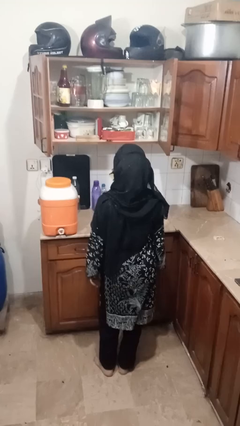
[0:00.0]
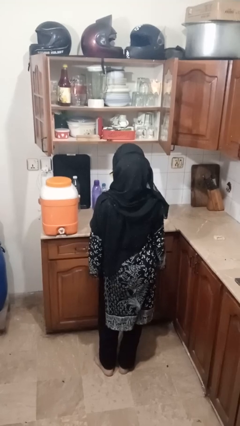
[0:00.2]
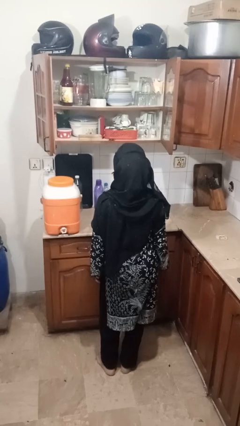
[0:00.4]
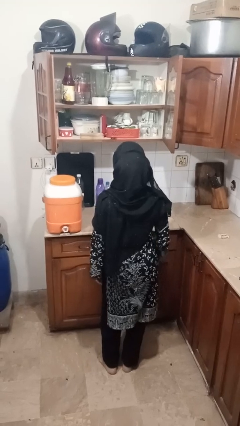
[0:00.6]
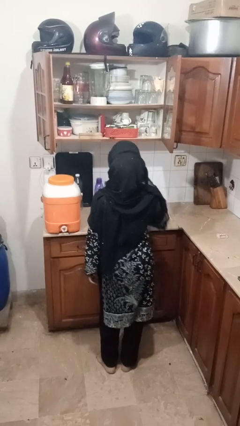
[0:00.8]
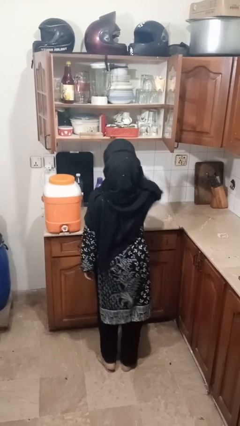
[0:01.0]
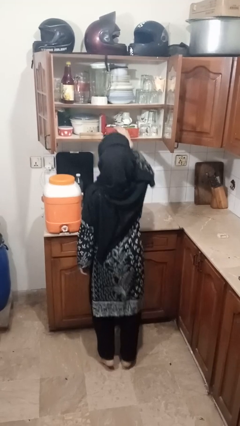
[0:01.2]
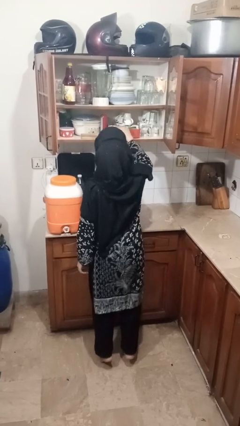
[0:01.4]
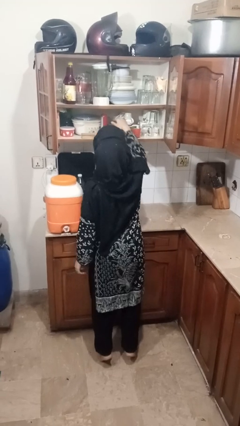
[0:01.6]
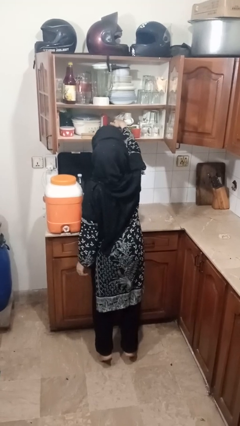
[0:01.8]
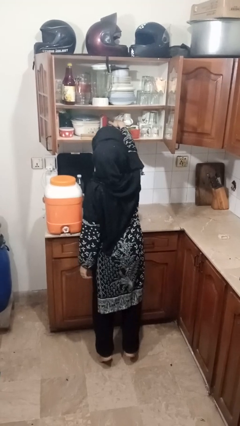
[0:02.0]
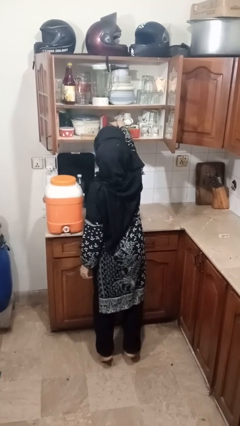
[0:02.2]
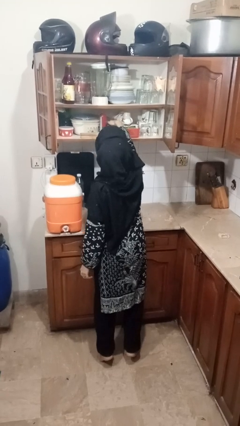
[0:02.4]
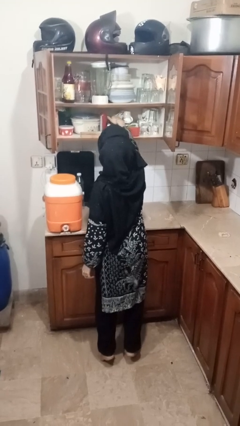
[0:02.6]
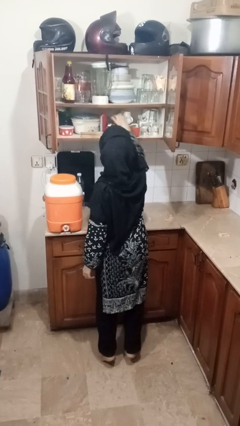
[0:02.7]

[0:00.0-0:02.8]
person searches in cabinet

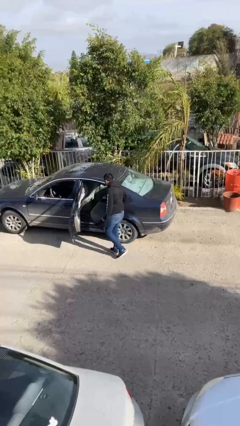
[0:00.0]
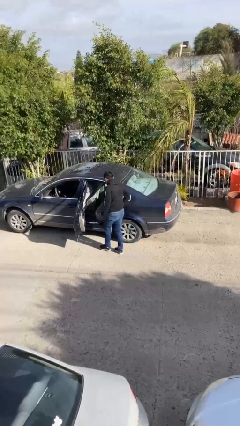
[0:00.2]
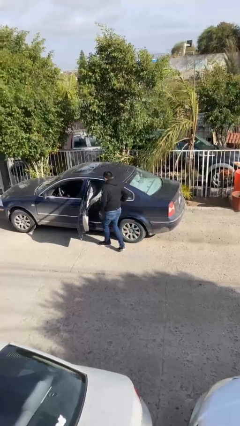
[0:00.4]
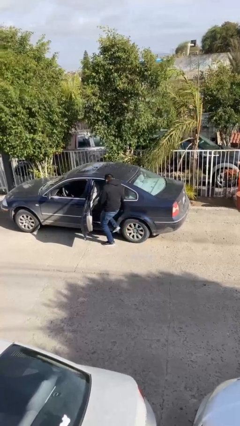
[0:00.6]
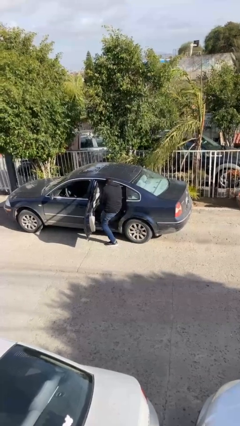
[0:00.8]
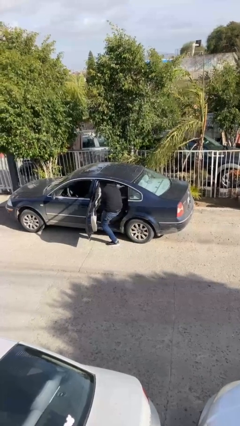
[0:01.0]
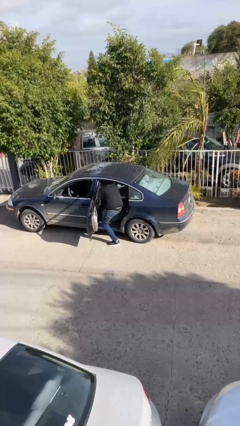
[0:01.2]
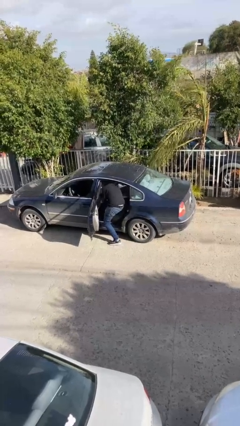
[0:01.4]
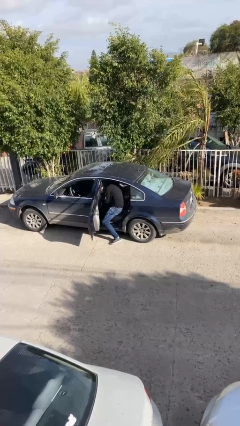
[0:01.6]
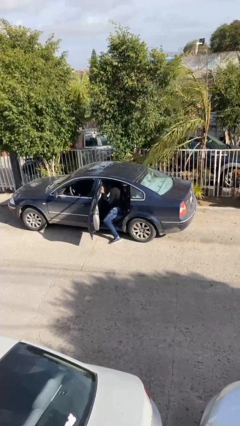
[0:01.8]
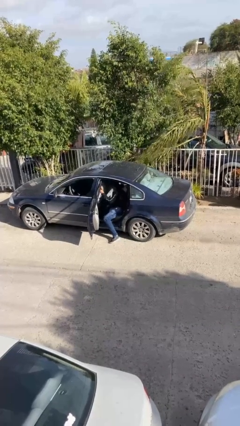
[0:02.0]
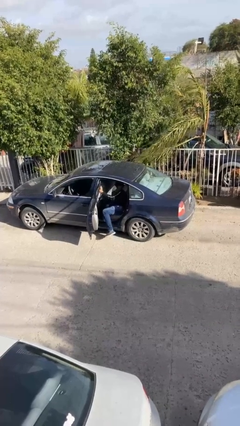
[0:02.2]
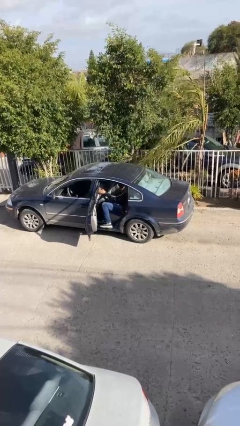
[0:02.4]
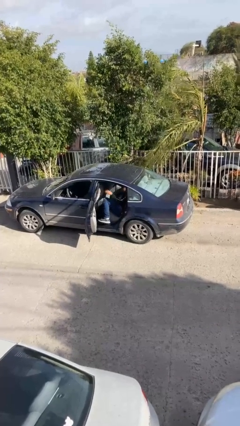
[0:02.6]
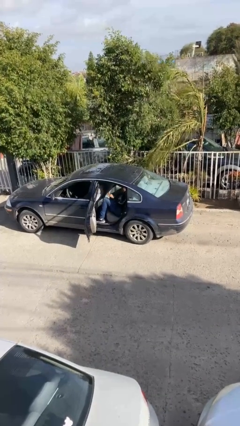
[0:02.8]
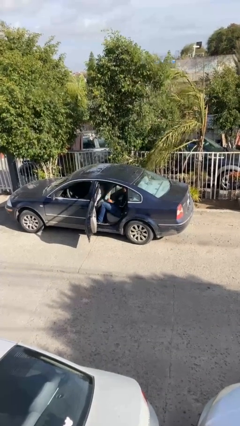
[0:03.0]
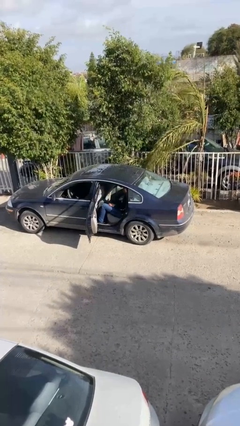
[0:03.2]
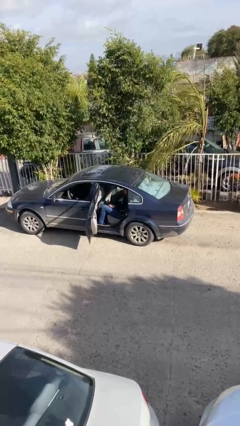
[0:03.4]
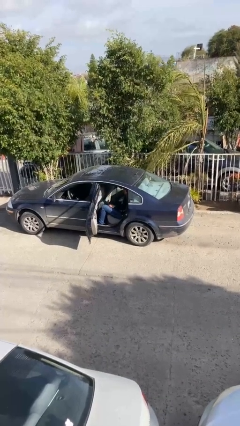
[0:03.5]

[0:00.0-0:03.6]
person enters car

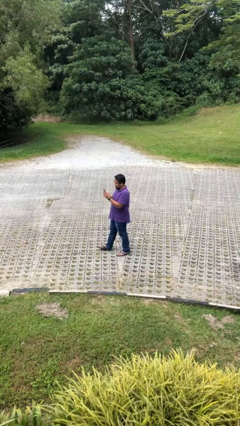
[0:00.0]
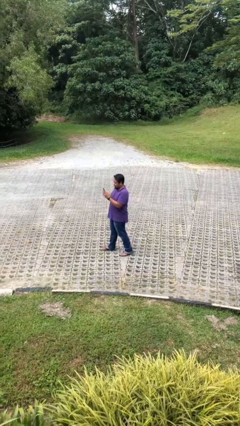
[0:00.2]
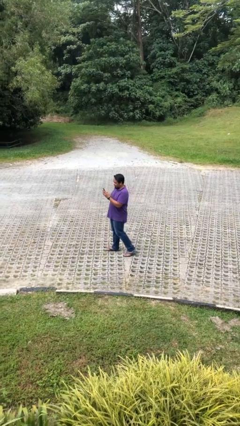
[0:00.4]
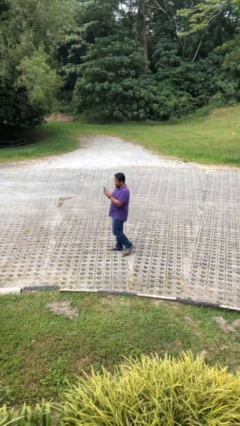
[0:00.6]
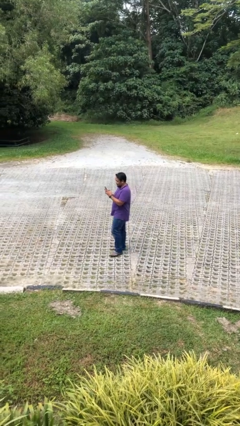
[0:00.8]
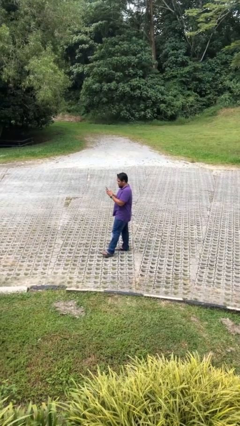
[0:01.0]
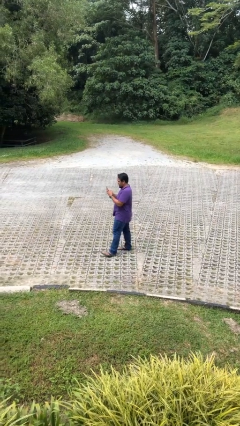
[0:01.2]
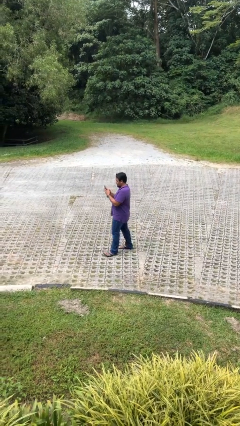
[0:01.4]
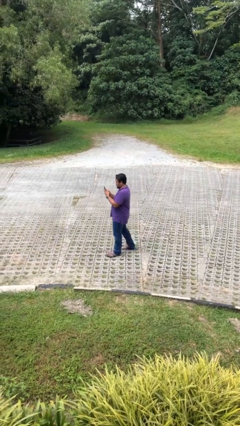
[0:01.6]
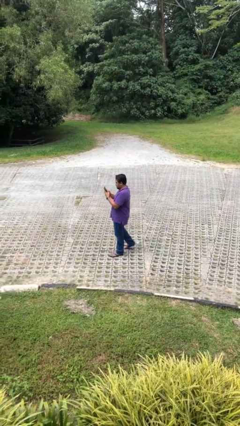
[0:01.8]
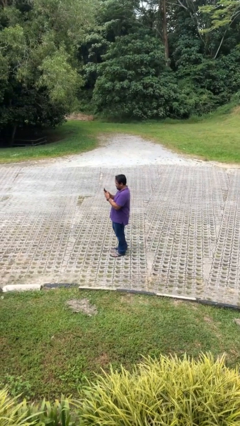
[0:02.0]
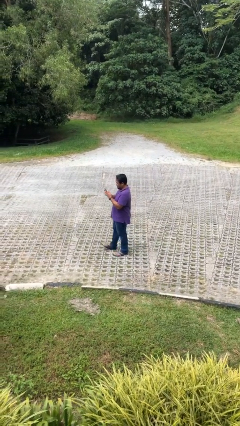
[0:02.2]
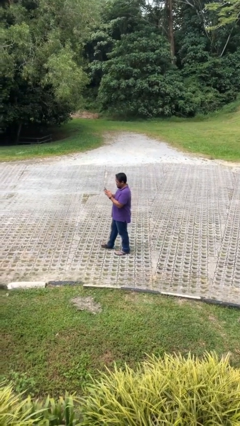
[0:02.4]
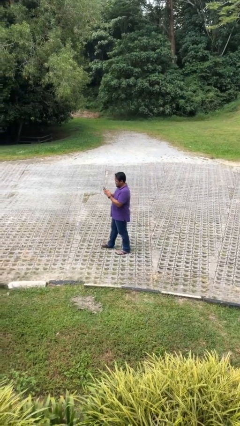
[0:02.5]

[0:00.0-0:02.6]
person texts on phone

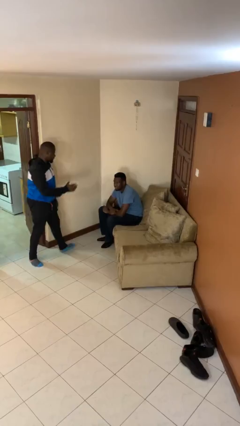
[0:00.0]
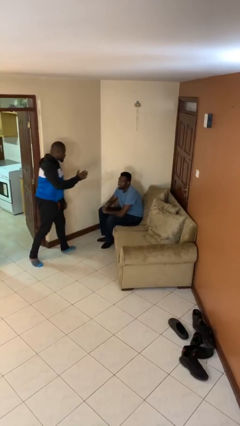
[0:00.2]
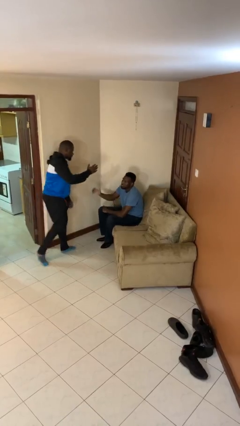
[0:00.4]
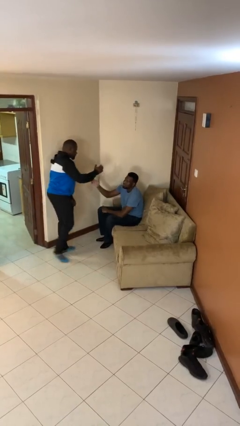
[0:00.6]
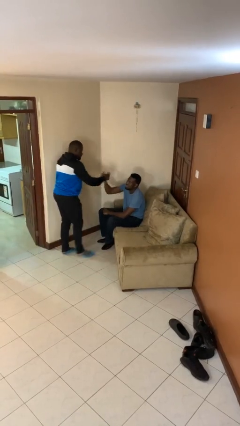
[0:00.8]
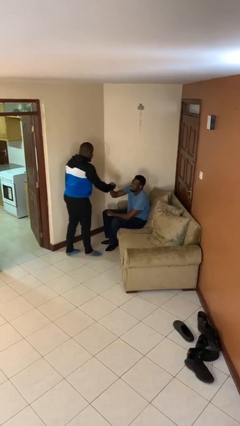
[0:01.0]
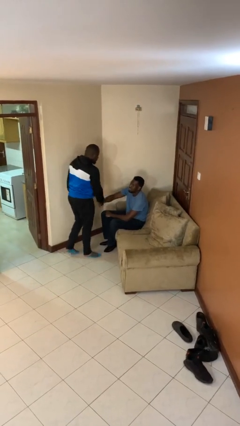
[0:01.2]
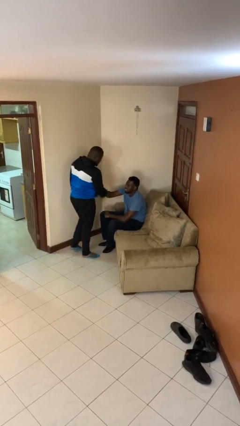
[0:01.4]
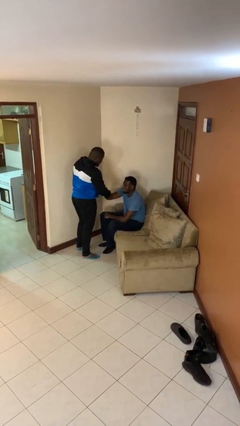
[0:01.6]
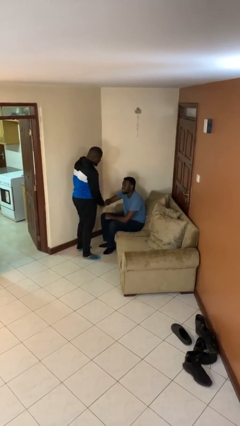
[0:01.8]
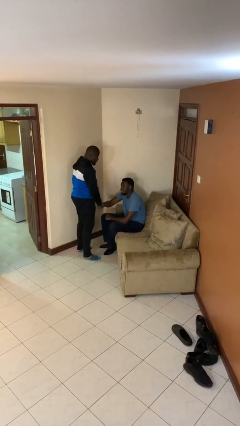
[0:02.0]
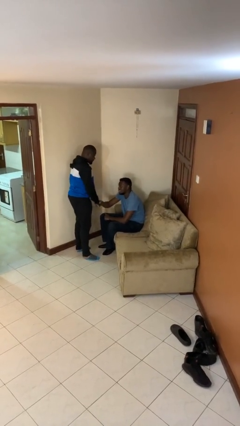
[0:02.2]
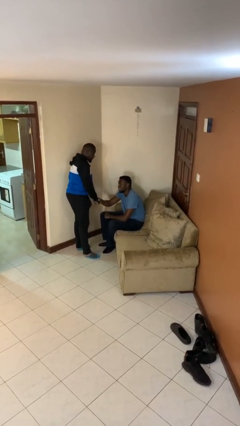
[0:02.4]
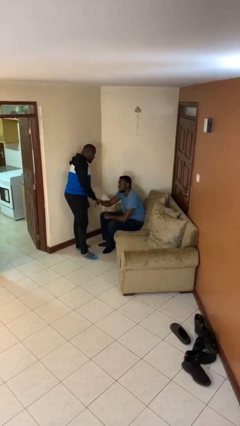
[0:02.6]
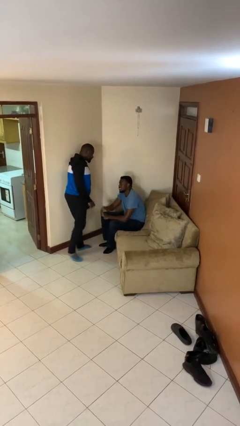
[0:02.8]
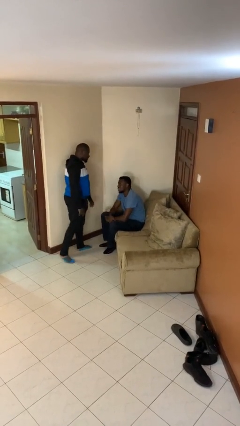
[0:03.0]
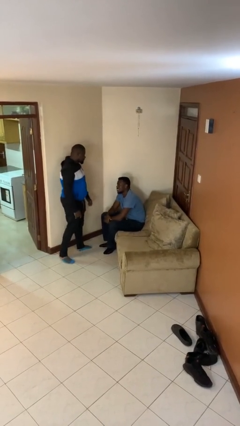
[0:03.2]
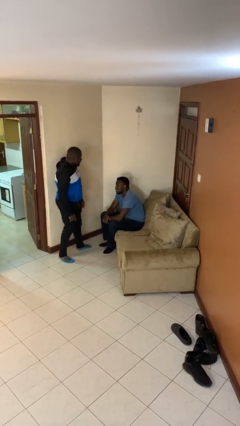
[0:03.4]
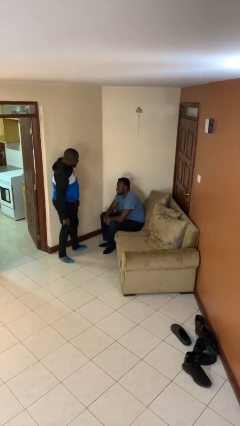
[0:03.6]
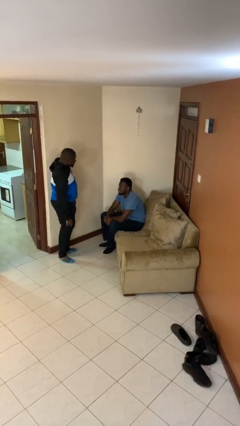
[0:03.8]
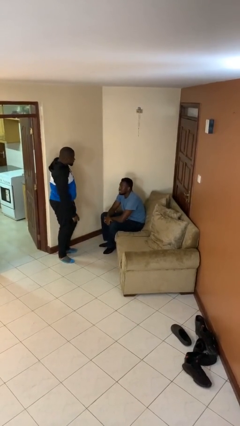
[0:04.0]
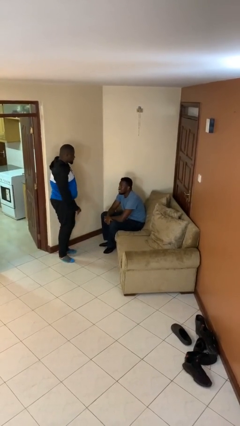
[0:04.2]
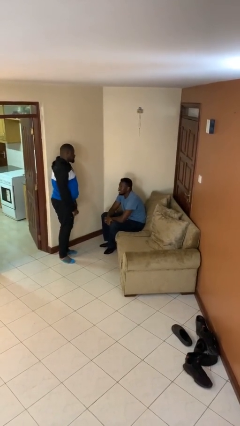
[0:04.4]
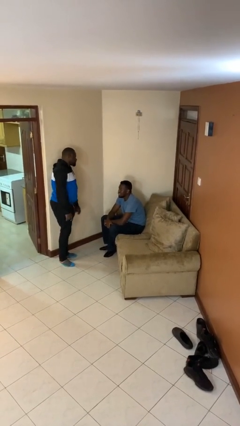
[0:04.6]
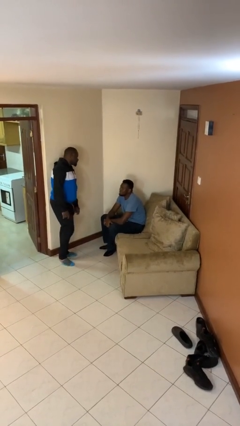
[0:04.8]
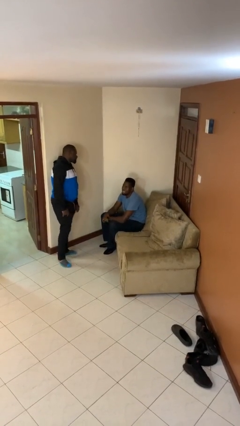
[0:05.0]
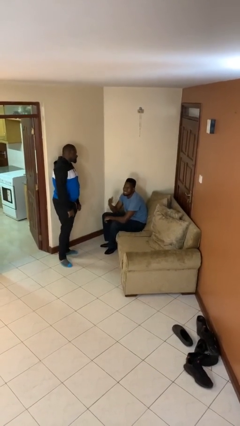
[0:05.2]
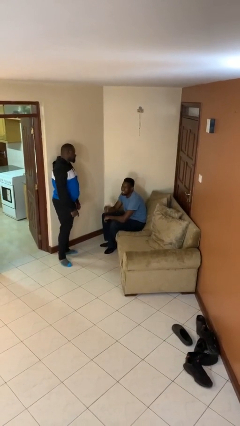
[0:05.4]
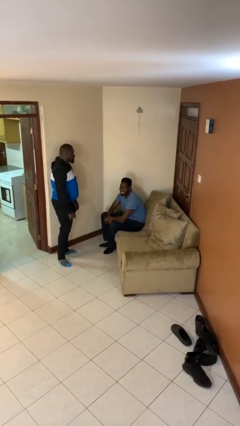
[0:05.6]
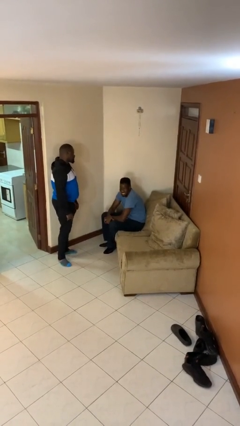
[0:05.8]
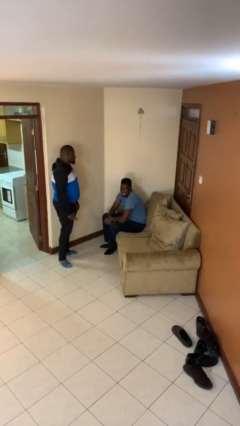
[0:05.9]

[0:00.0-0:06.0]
person shakes hand

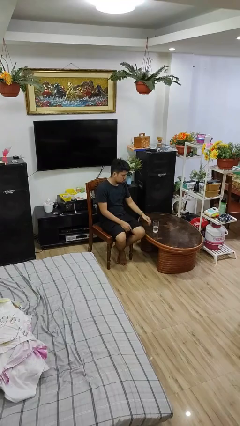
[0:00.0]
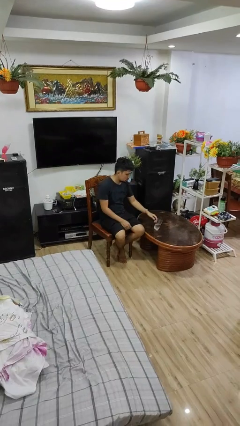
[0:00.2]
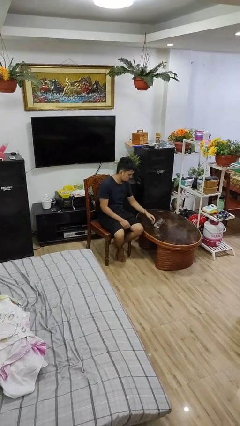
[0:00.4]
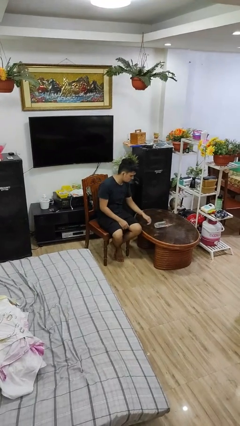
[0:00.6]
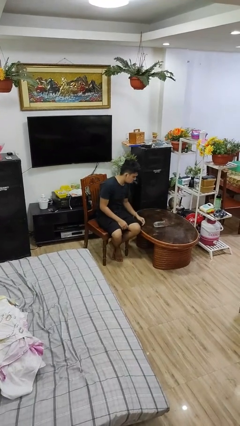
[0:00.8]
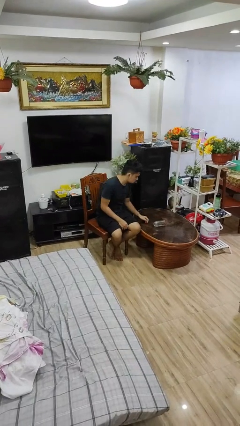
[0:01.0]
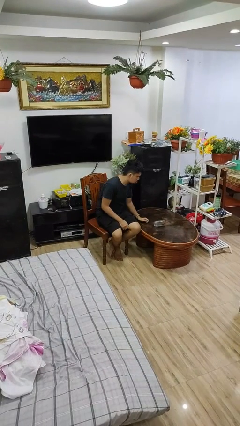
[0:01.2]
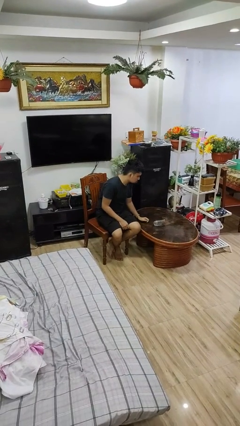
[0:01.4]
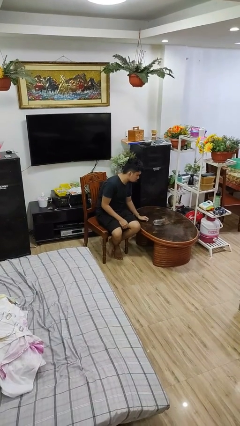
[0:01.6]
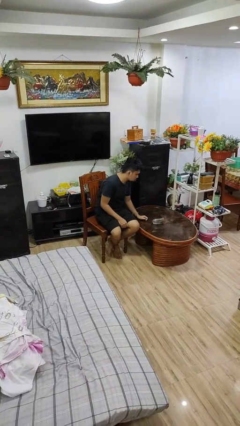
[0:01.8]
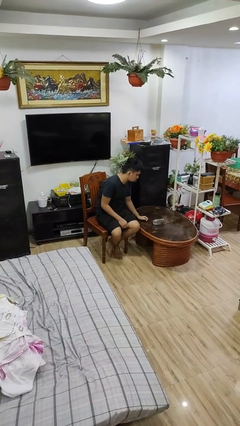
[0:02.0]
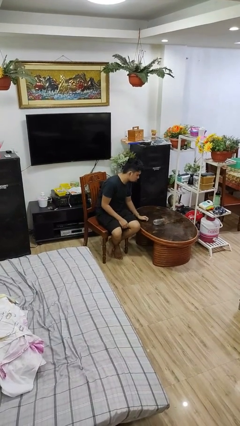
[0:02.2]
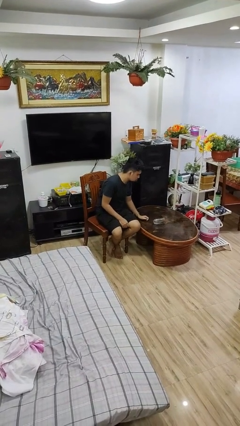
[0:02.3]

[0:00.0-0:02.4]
person spills on table

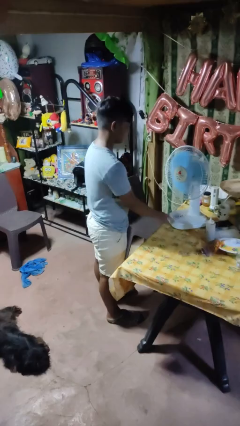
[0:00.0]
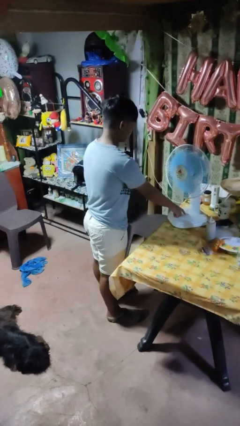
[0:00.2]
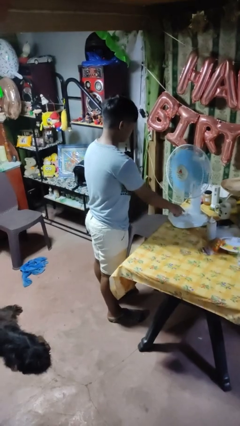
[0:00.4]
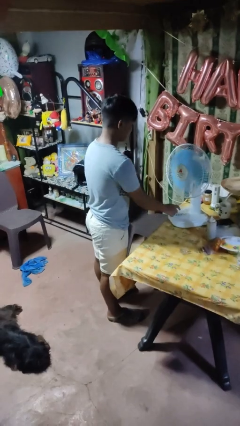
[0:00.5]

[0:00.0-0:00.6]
person turns off fan
